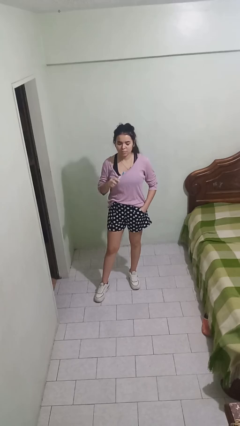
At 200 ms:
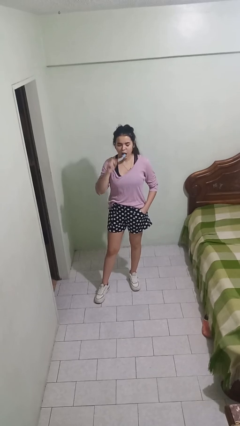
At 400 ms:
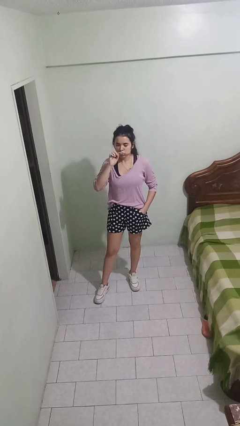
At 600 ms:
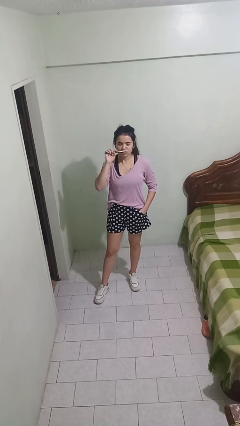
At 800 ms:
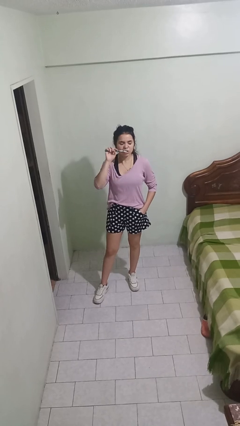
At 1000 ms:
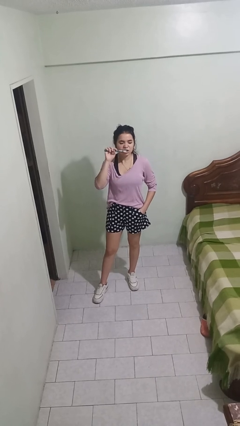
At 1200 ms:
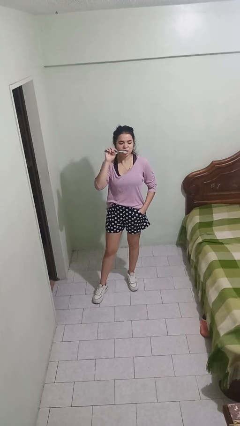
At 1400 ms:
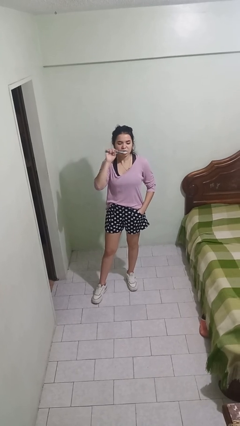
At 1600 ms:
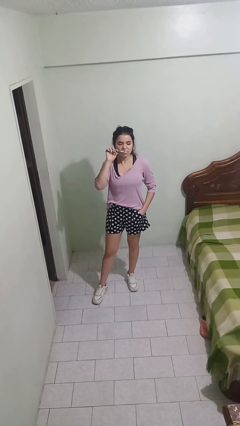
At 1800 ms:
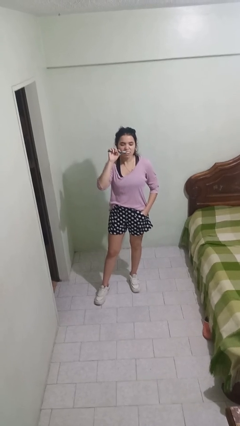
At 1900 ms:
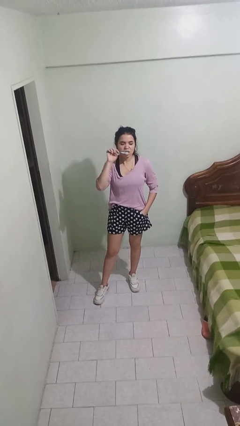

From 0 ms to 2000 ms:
person brushes teeth

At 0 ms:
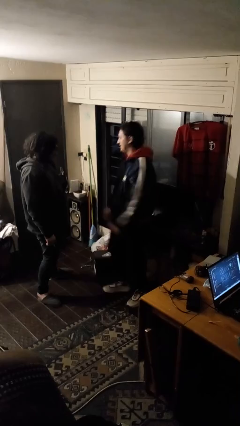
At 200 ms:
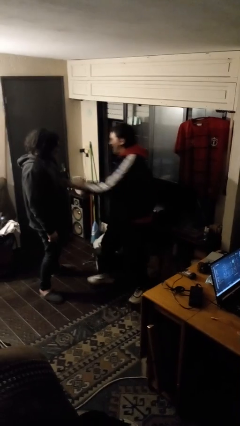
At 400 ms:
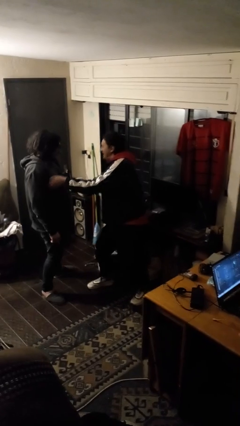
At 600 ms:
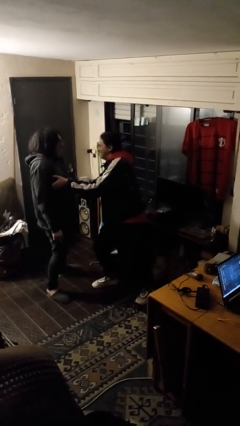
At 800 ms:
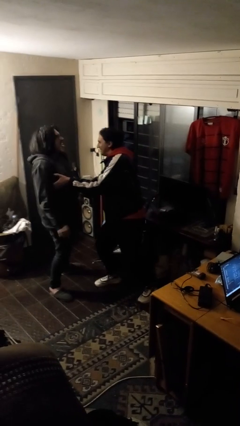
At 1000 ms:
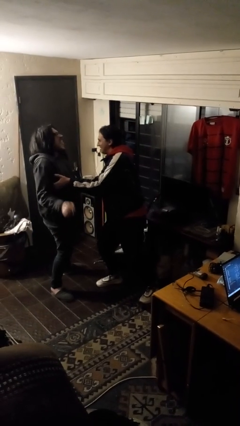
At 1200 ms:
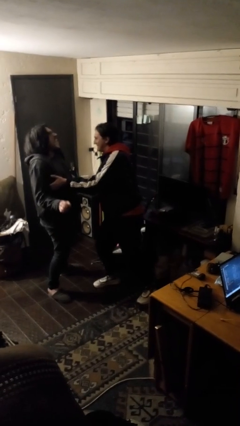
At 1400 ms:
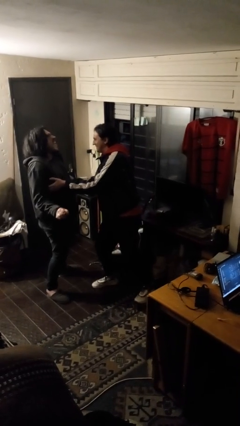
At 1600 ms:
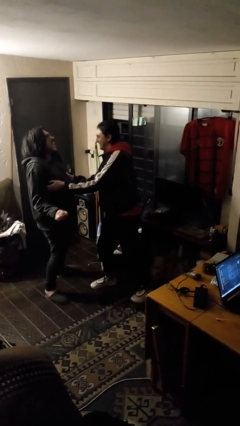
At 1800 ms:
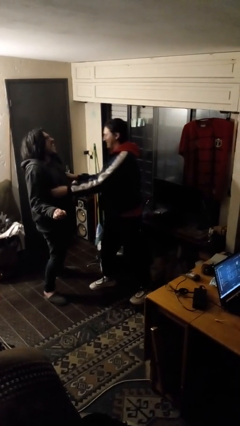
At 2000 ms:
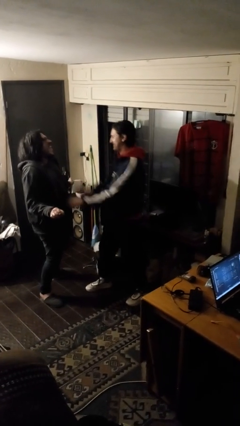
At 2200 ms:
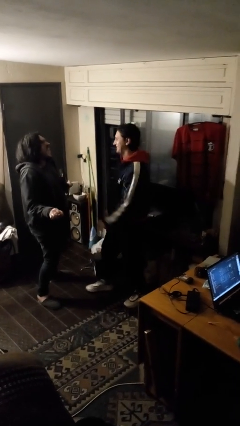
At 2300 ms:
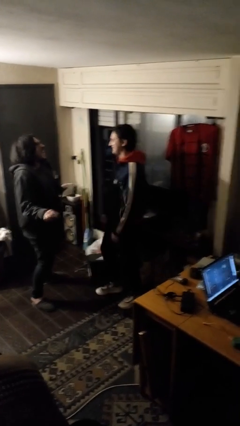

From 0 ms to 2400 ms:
person tickles person

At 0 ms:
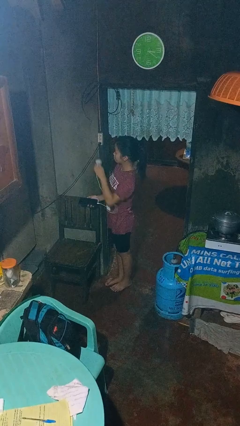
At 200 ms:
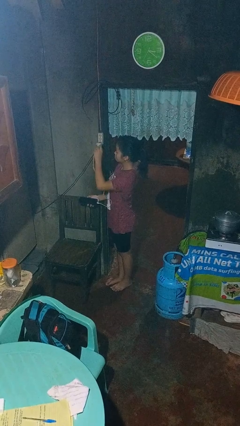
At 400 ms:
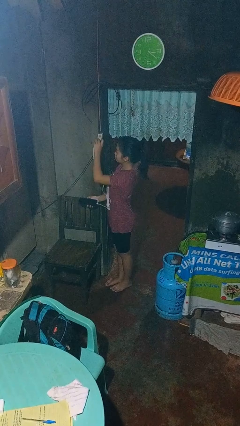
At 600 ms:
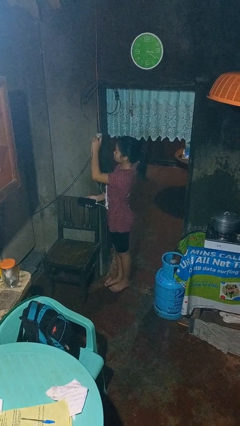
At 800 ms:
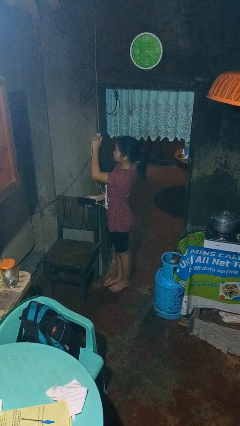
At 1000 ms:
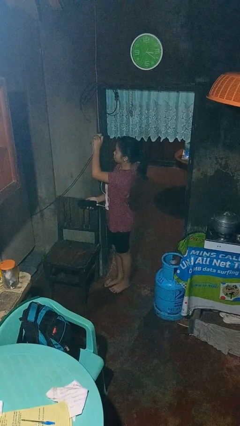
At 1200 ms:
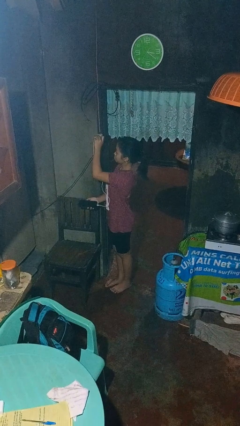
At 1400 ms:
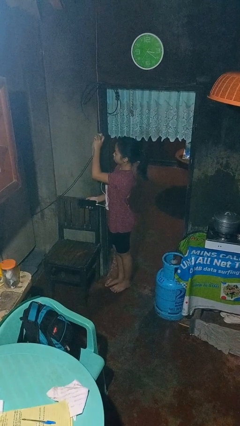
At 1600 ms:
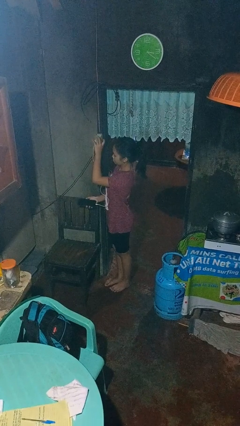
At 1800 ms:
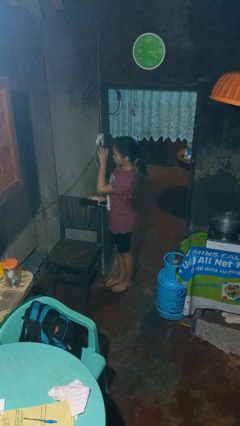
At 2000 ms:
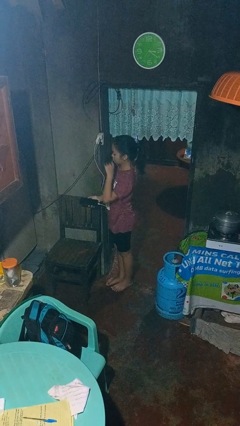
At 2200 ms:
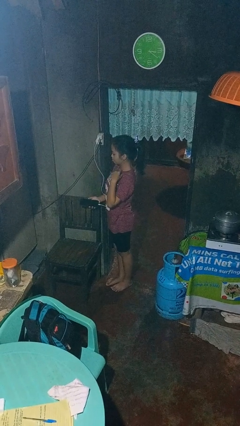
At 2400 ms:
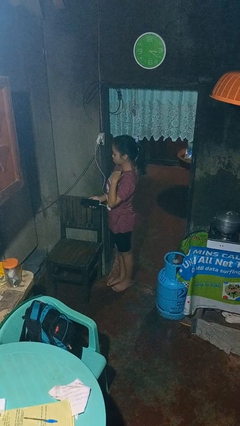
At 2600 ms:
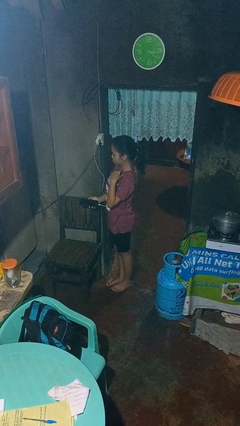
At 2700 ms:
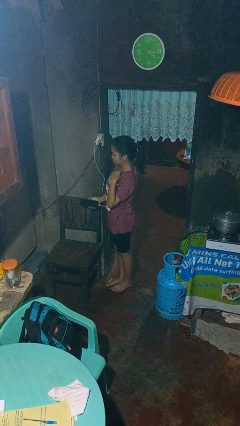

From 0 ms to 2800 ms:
person plugs into electrical socket

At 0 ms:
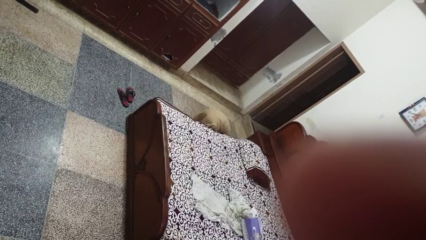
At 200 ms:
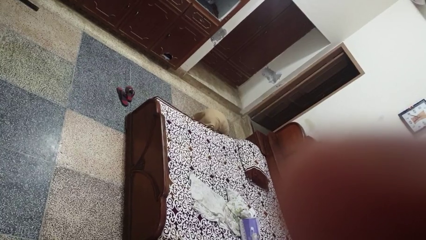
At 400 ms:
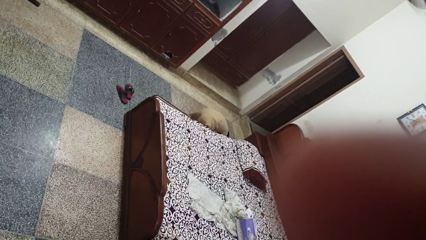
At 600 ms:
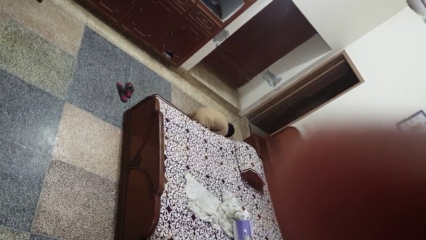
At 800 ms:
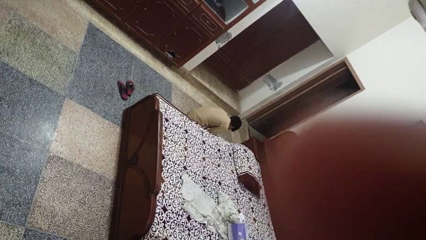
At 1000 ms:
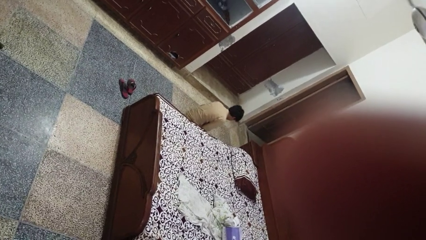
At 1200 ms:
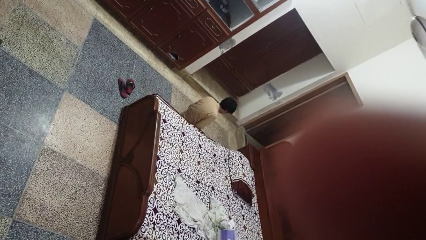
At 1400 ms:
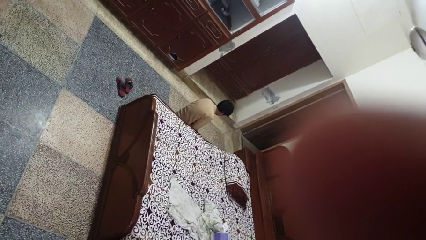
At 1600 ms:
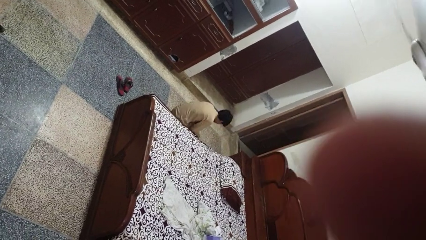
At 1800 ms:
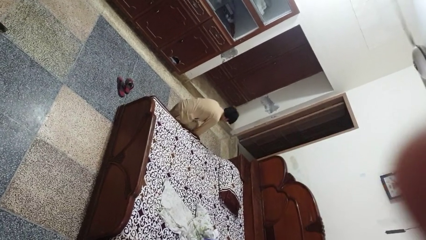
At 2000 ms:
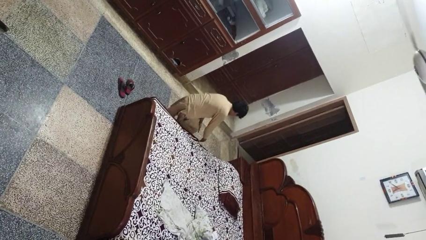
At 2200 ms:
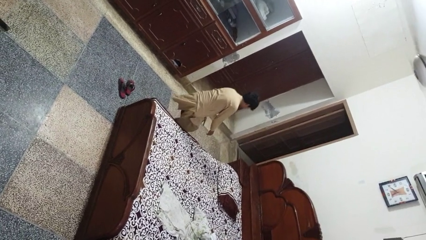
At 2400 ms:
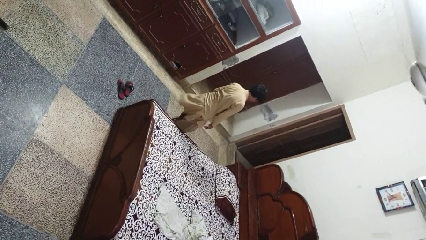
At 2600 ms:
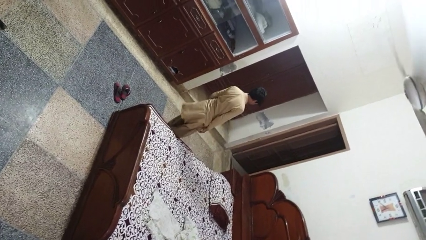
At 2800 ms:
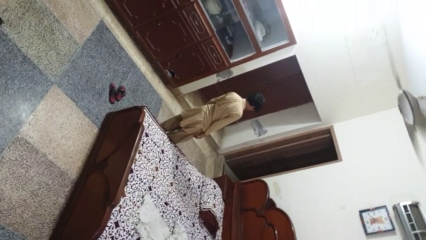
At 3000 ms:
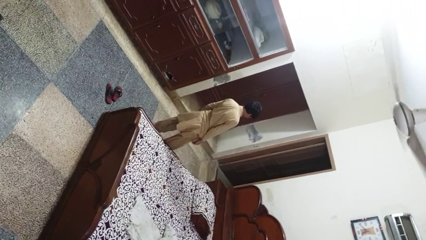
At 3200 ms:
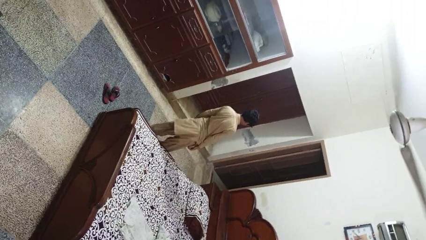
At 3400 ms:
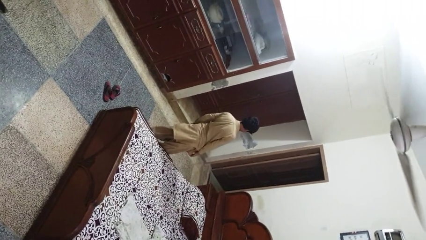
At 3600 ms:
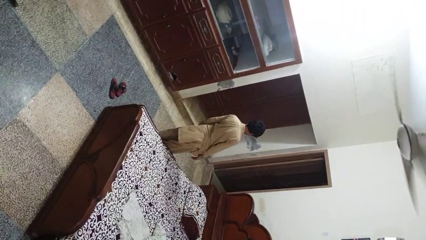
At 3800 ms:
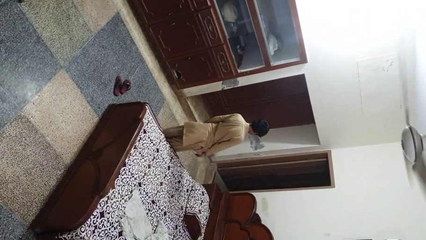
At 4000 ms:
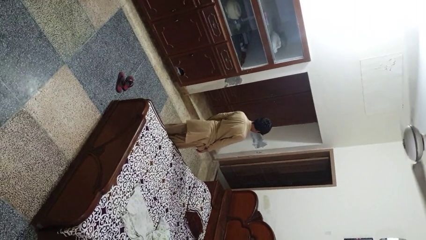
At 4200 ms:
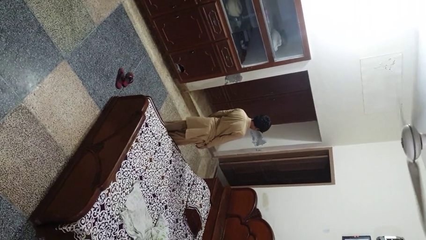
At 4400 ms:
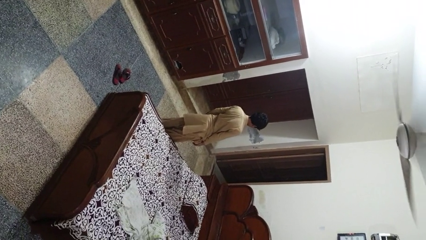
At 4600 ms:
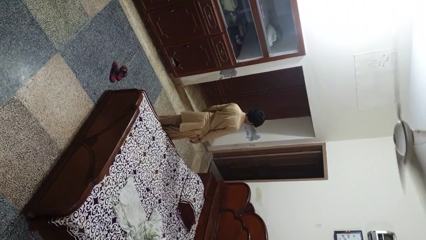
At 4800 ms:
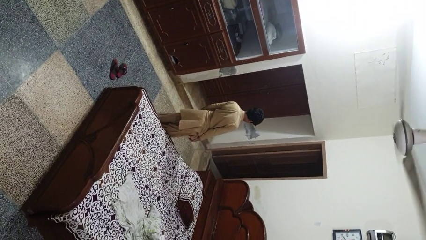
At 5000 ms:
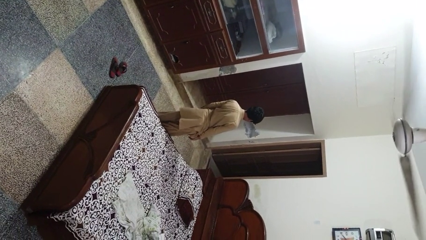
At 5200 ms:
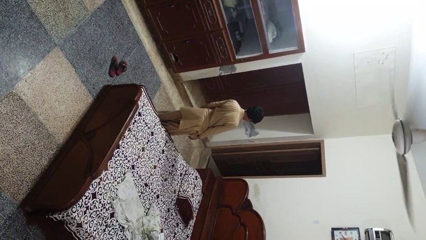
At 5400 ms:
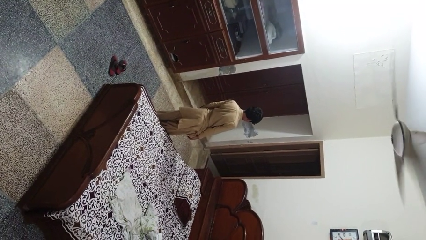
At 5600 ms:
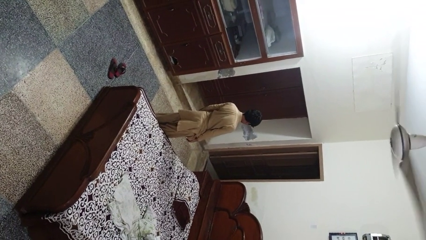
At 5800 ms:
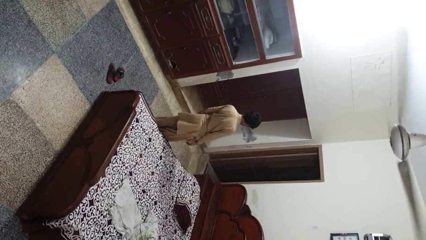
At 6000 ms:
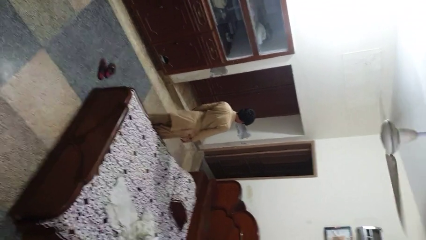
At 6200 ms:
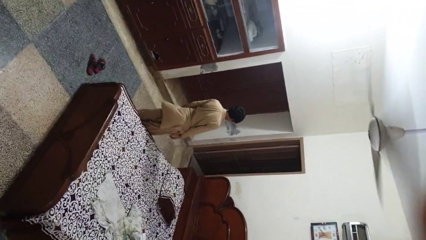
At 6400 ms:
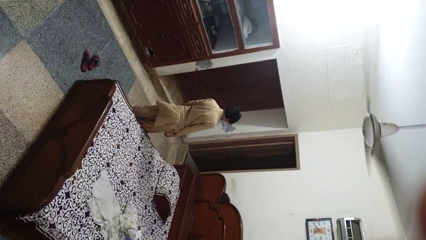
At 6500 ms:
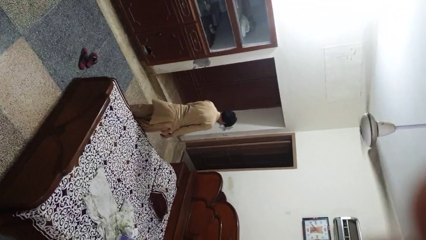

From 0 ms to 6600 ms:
person stands up from floor

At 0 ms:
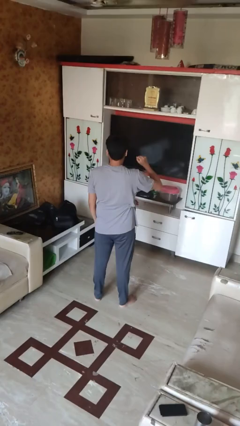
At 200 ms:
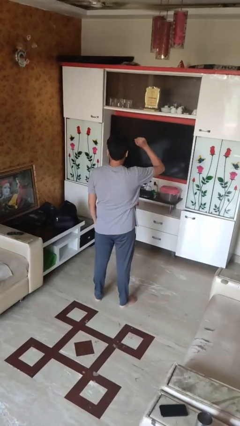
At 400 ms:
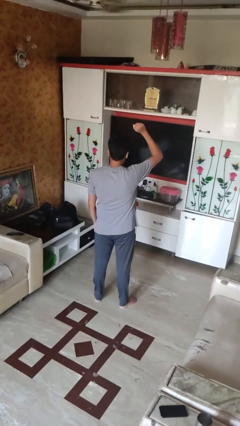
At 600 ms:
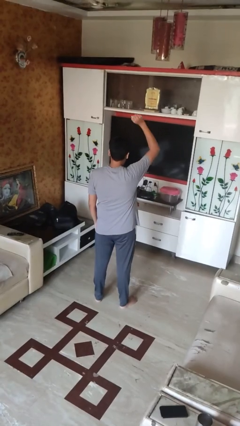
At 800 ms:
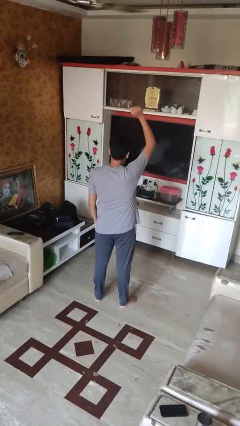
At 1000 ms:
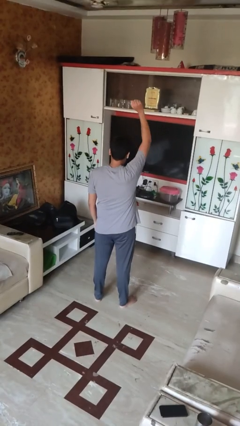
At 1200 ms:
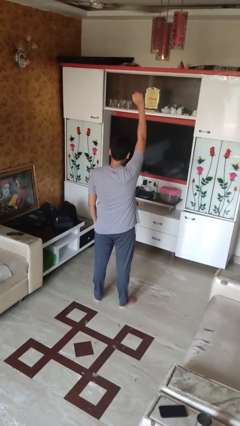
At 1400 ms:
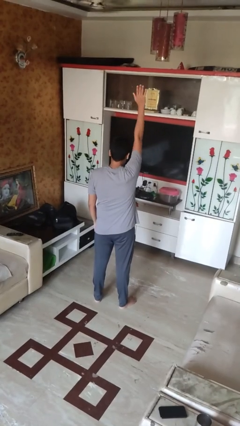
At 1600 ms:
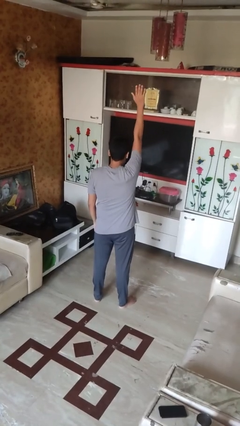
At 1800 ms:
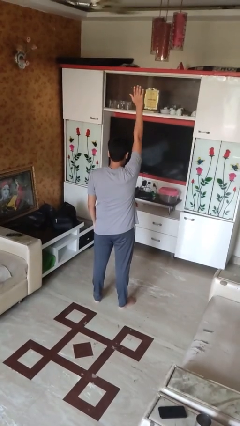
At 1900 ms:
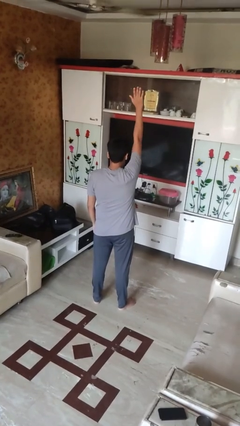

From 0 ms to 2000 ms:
person gestures raise hand

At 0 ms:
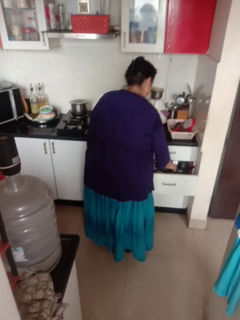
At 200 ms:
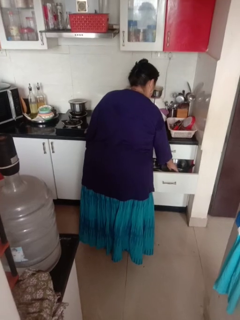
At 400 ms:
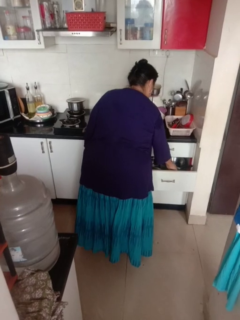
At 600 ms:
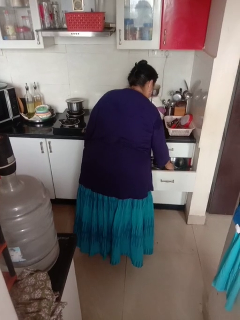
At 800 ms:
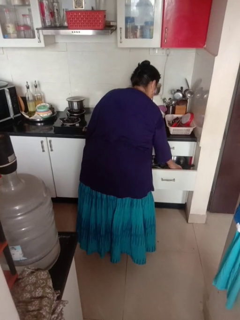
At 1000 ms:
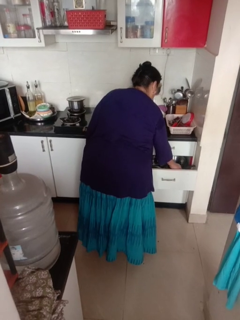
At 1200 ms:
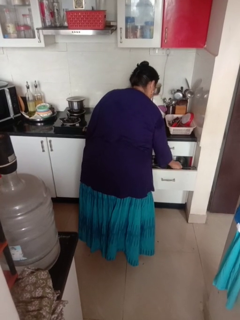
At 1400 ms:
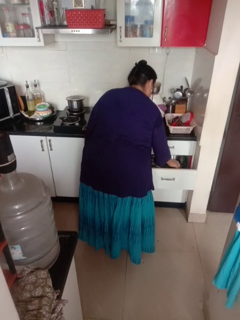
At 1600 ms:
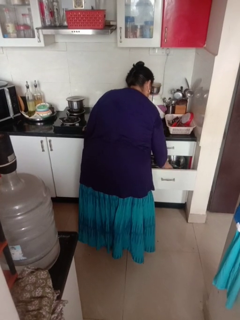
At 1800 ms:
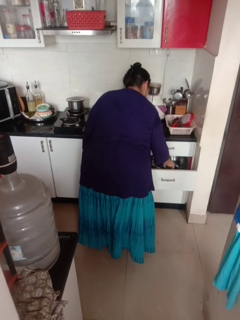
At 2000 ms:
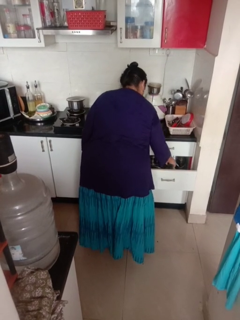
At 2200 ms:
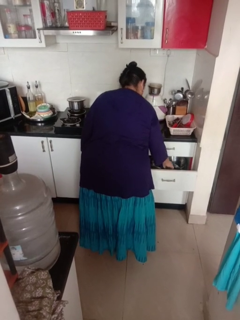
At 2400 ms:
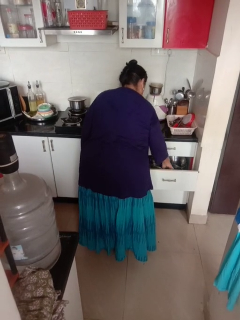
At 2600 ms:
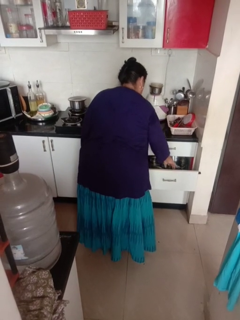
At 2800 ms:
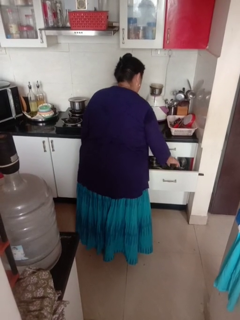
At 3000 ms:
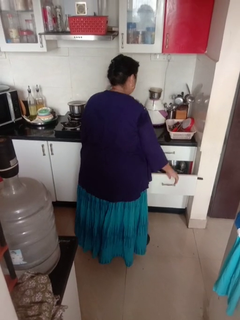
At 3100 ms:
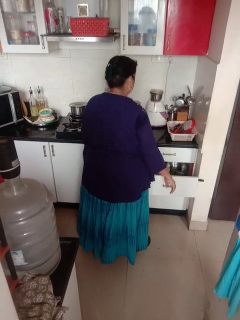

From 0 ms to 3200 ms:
person searches in kitchen drawer
